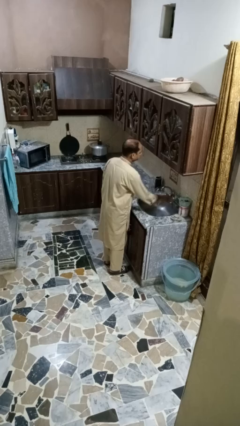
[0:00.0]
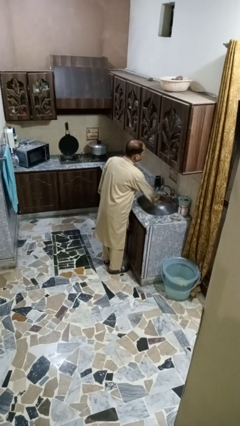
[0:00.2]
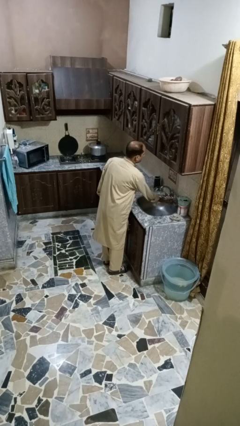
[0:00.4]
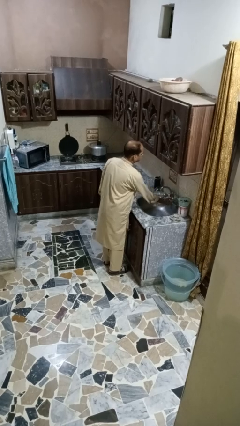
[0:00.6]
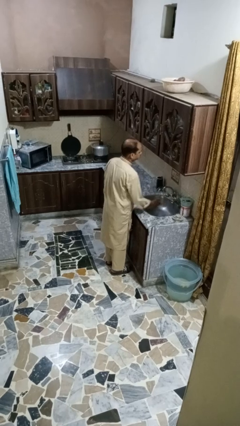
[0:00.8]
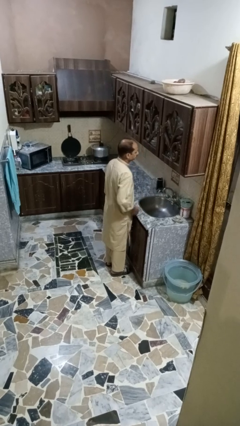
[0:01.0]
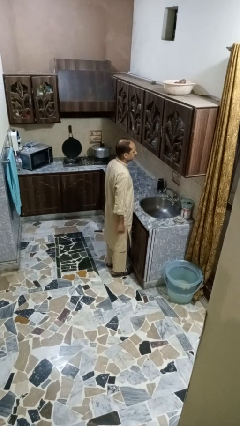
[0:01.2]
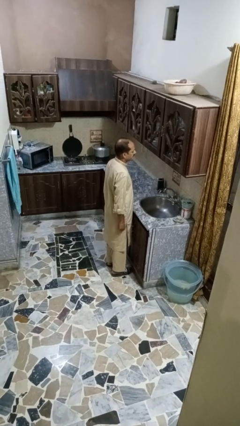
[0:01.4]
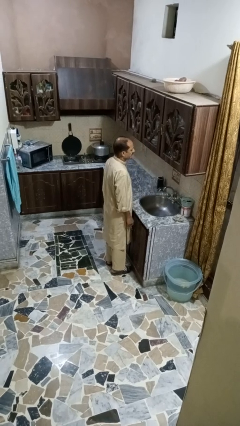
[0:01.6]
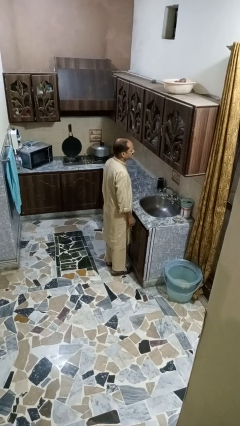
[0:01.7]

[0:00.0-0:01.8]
person turns off faucet

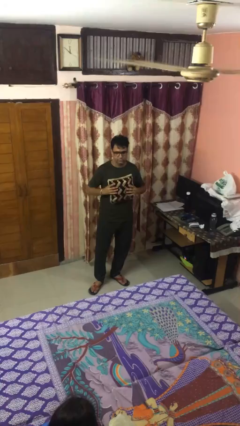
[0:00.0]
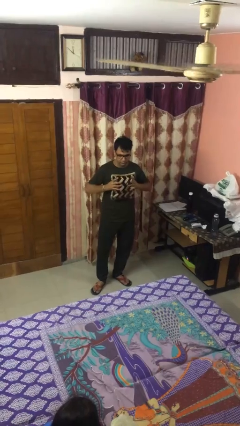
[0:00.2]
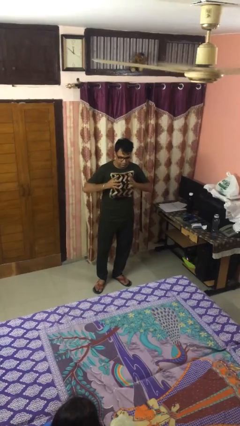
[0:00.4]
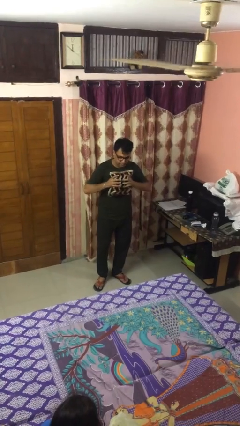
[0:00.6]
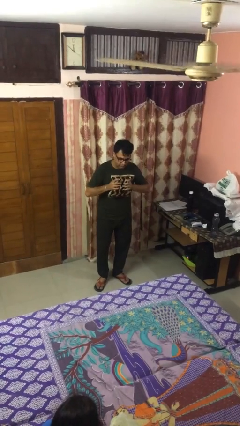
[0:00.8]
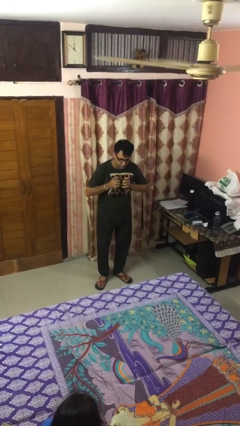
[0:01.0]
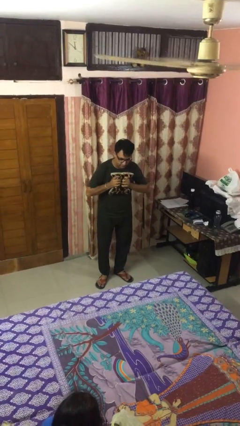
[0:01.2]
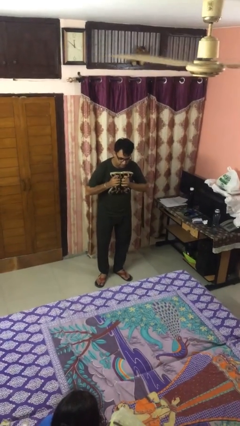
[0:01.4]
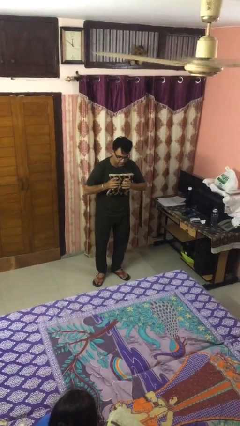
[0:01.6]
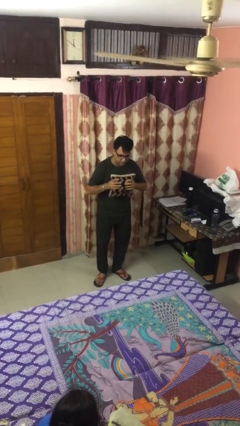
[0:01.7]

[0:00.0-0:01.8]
person squeezes object

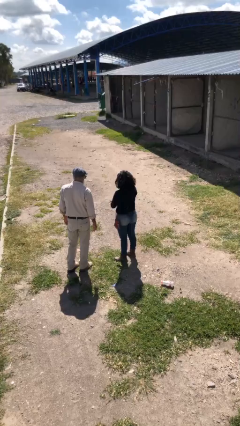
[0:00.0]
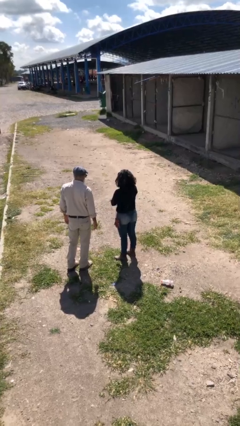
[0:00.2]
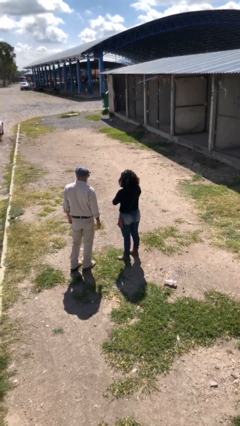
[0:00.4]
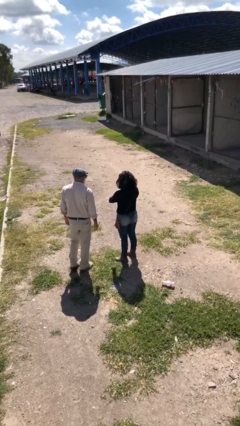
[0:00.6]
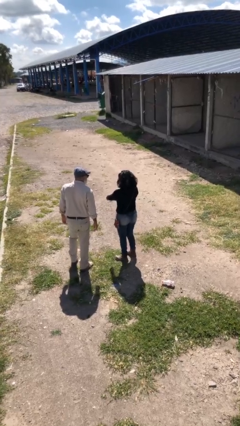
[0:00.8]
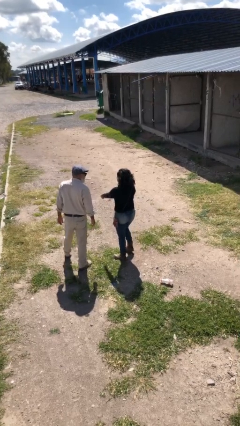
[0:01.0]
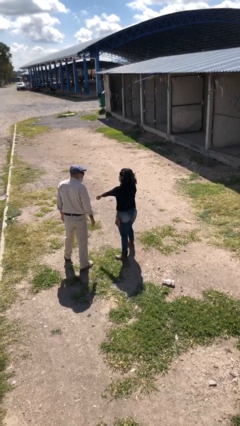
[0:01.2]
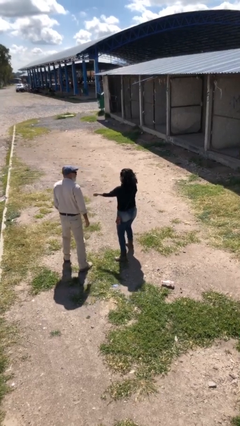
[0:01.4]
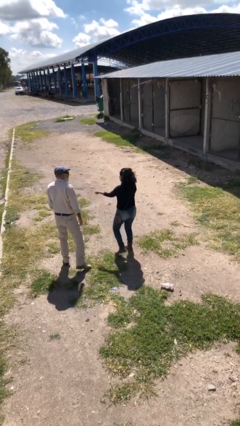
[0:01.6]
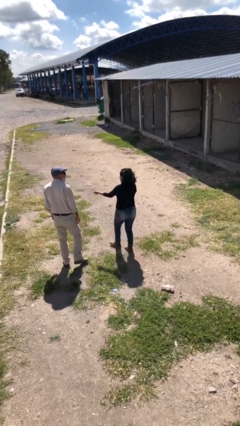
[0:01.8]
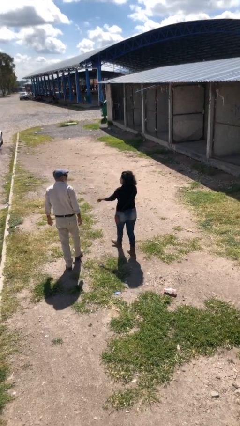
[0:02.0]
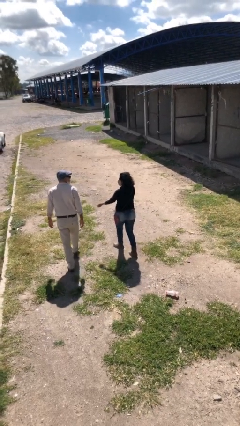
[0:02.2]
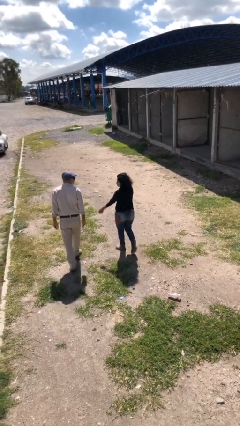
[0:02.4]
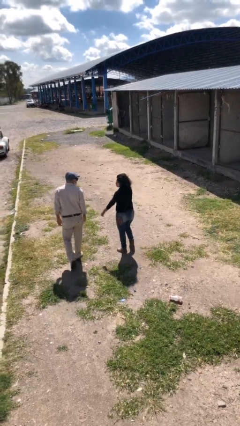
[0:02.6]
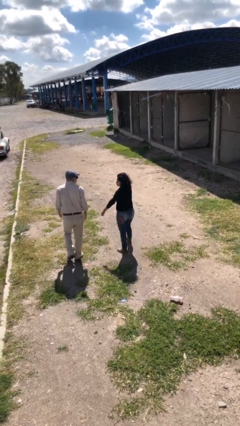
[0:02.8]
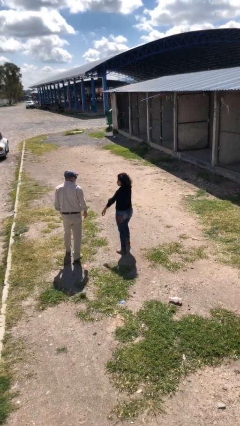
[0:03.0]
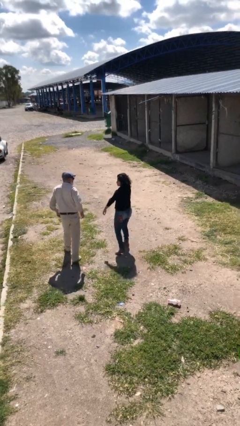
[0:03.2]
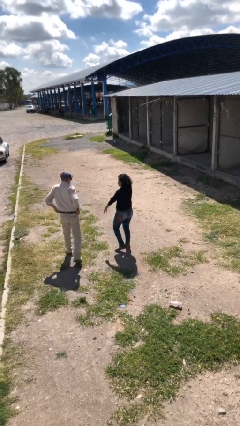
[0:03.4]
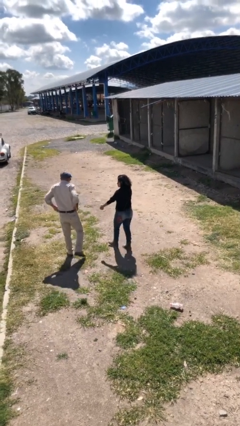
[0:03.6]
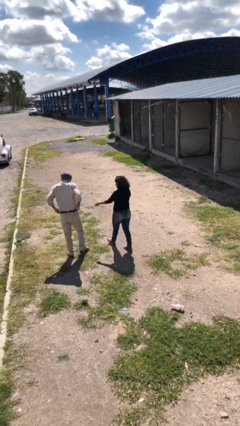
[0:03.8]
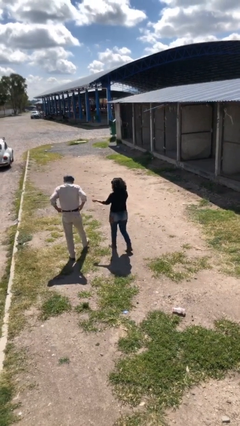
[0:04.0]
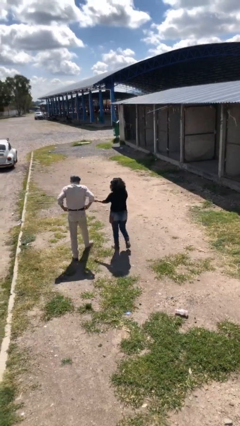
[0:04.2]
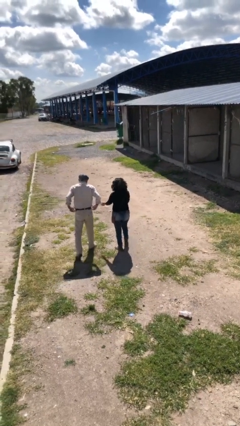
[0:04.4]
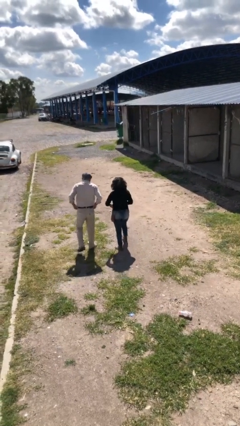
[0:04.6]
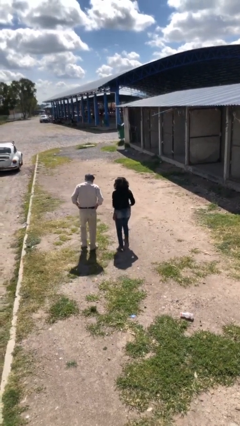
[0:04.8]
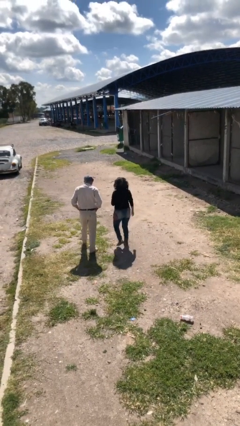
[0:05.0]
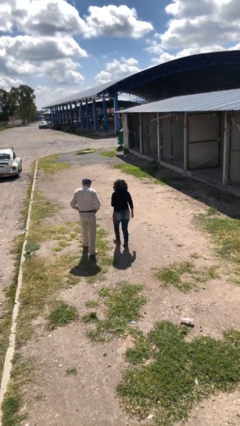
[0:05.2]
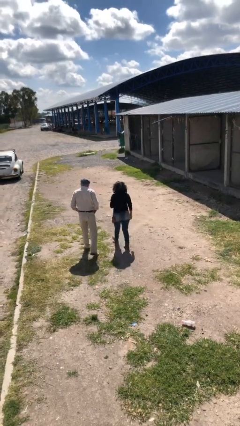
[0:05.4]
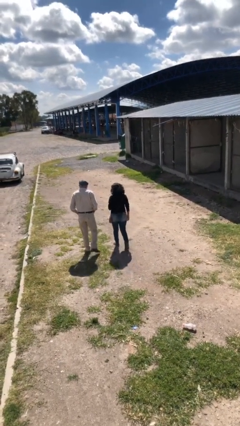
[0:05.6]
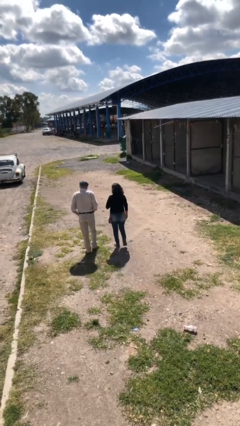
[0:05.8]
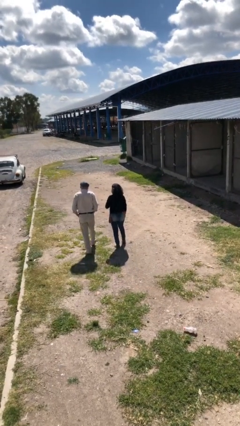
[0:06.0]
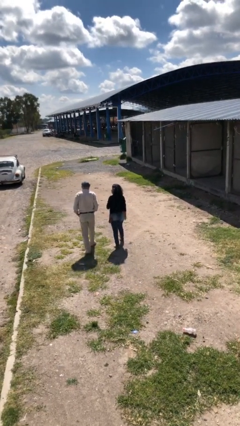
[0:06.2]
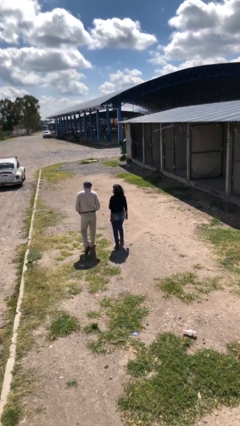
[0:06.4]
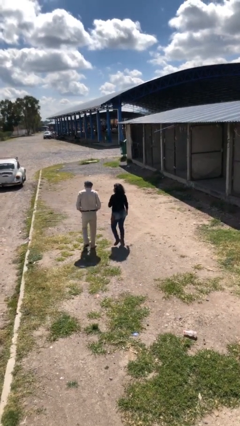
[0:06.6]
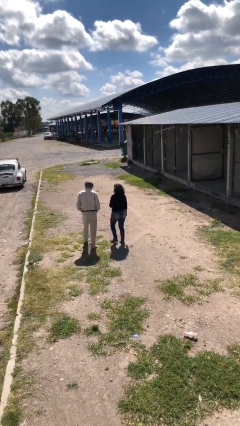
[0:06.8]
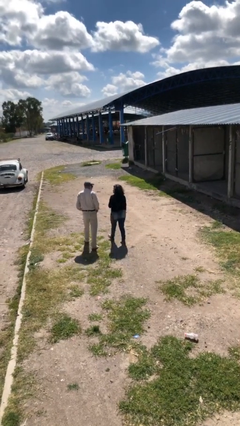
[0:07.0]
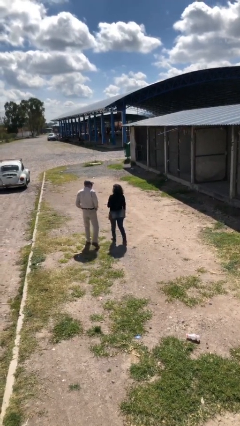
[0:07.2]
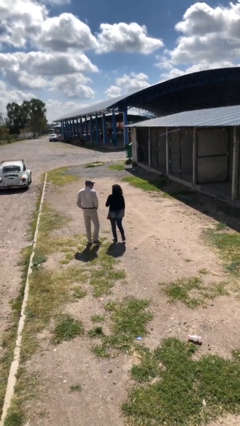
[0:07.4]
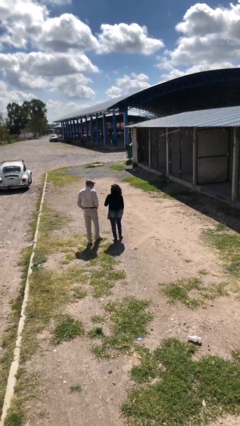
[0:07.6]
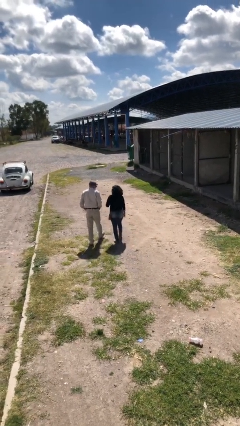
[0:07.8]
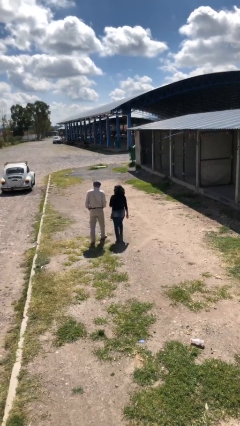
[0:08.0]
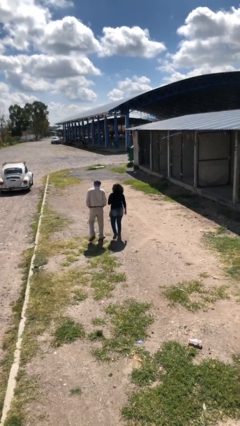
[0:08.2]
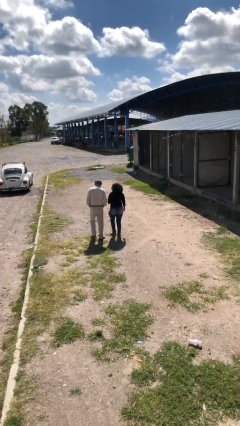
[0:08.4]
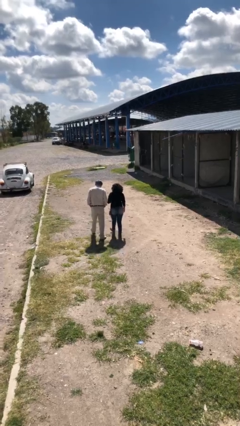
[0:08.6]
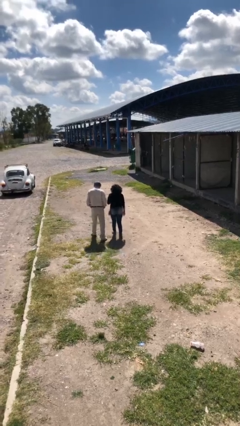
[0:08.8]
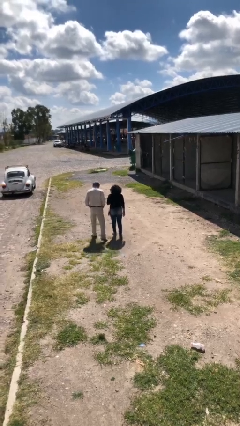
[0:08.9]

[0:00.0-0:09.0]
person talks to person

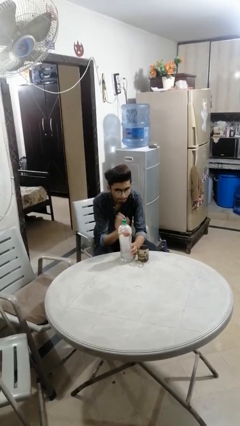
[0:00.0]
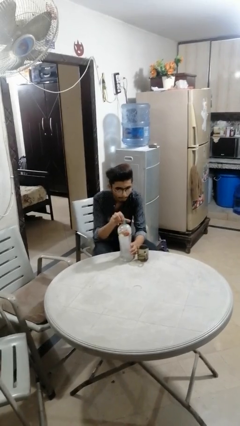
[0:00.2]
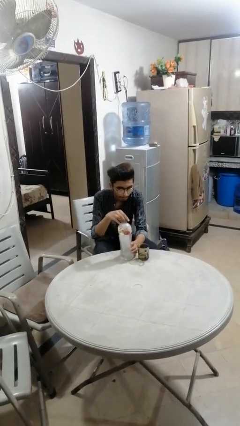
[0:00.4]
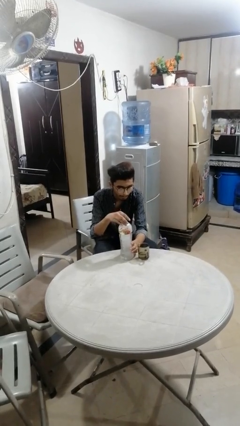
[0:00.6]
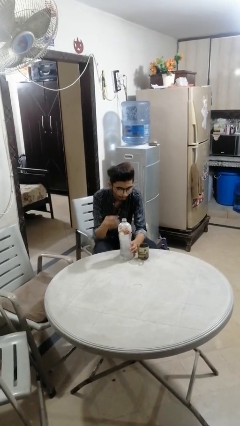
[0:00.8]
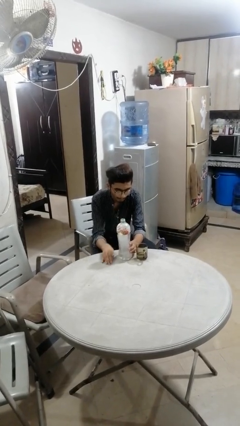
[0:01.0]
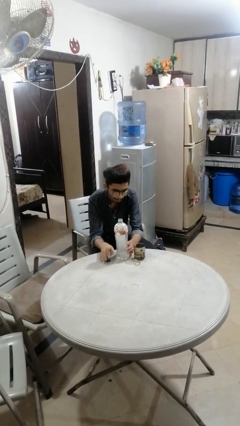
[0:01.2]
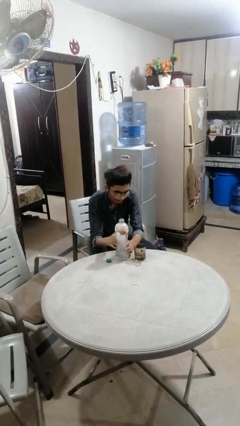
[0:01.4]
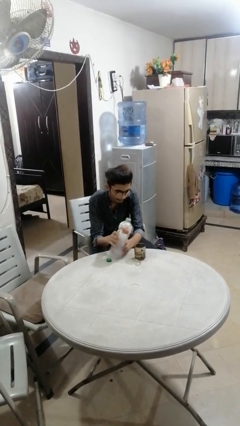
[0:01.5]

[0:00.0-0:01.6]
person unscrews lid from bottle

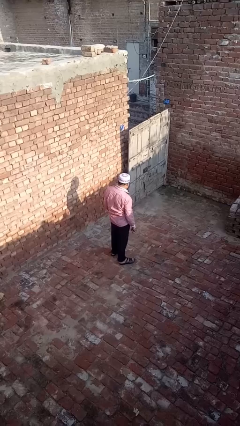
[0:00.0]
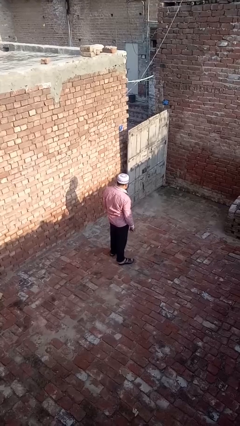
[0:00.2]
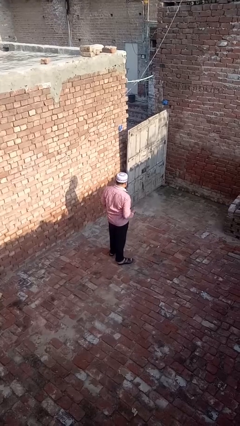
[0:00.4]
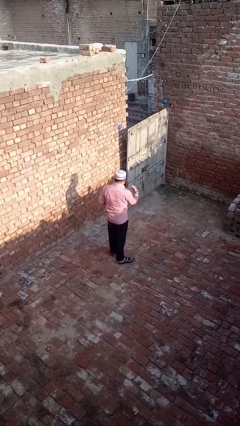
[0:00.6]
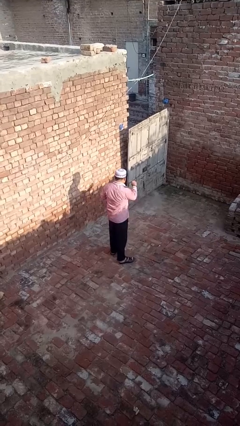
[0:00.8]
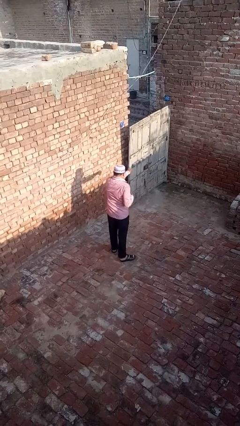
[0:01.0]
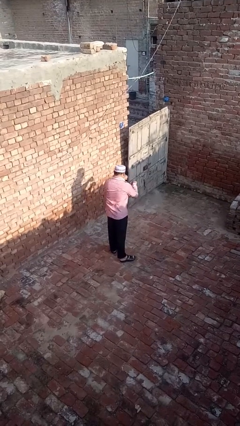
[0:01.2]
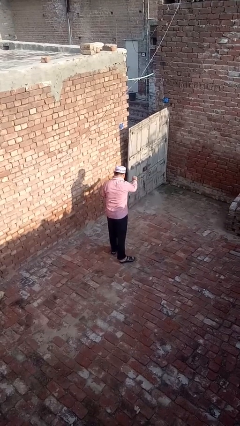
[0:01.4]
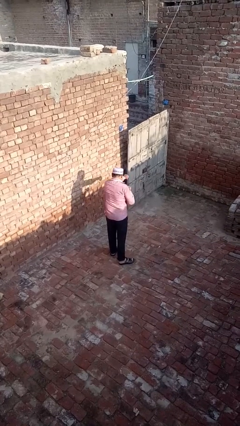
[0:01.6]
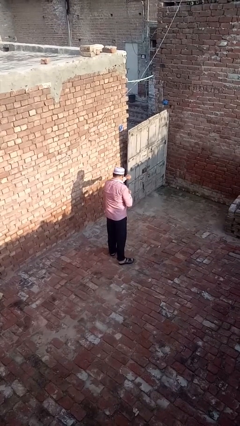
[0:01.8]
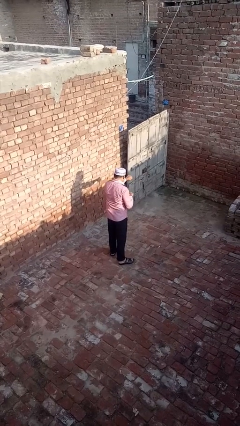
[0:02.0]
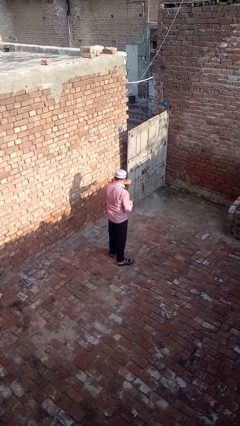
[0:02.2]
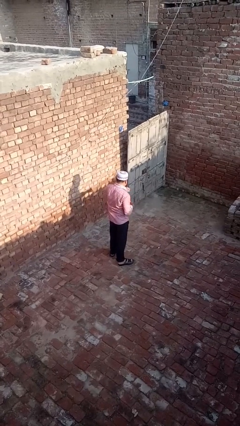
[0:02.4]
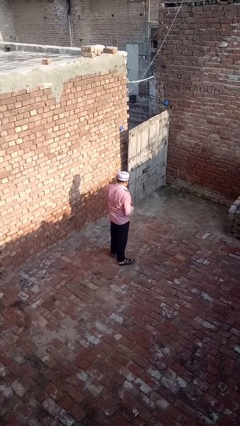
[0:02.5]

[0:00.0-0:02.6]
person punches

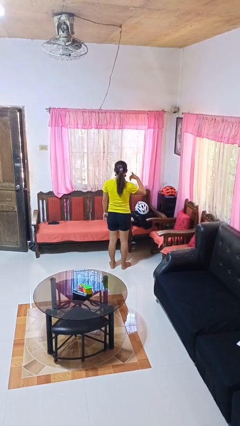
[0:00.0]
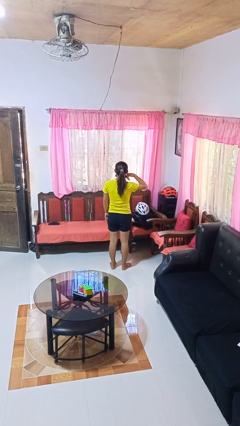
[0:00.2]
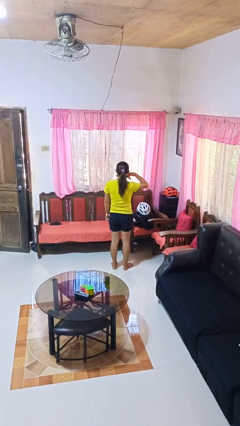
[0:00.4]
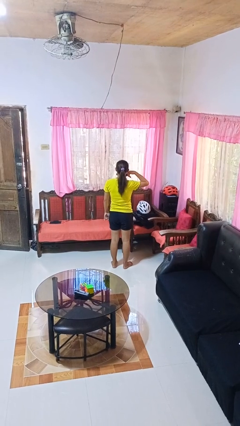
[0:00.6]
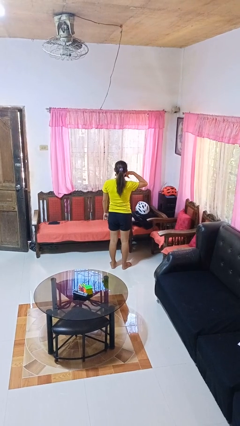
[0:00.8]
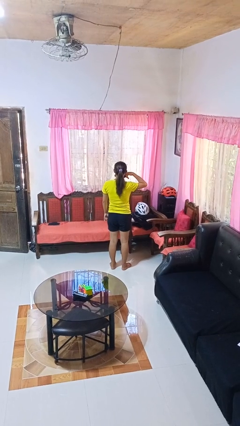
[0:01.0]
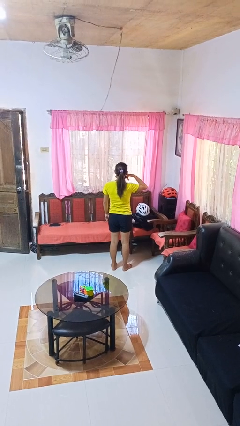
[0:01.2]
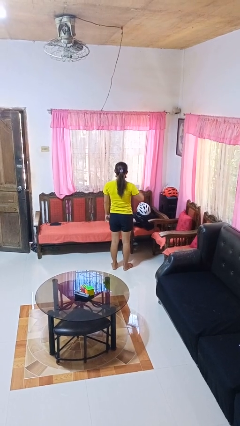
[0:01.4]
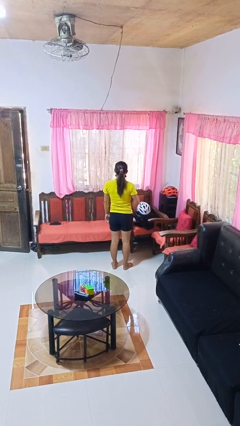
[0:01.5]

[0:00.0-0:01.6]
person gestures call me
